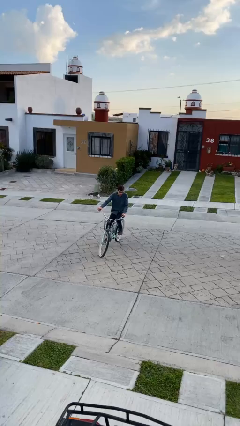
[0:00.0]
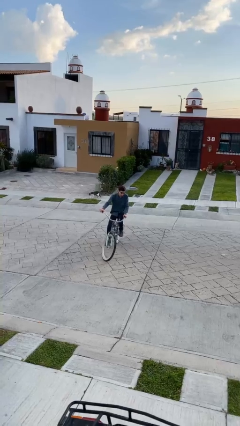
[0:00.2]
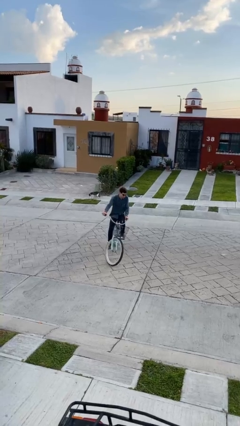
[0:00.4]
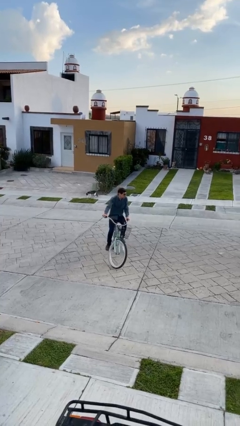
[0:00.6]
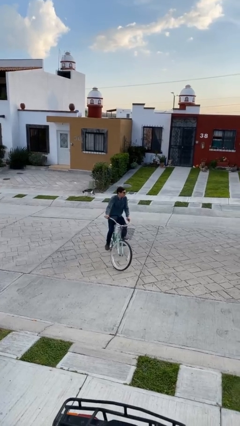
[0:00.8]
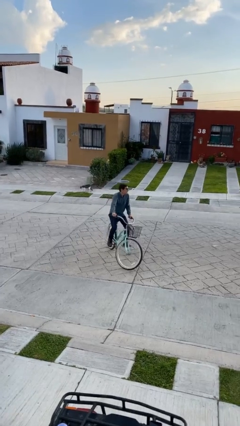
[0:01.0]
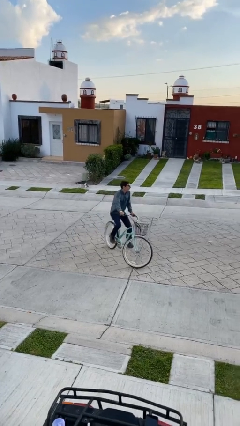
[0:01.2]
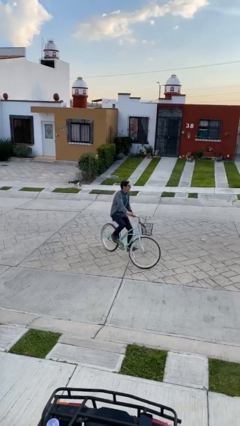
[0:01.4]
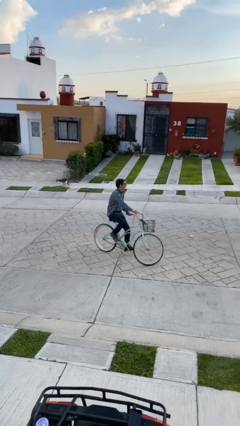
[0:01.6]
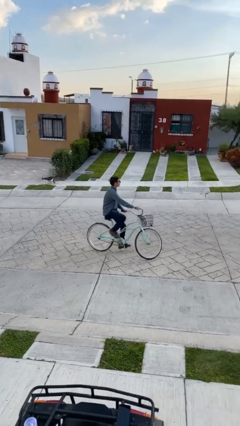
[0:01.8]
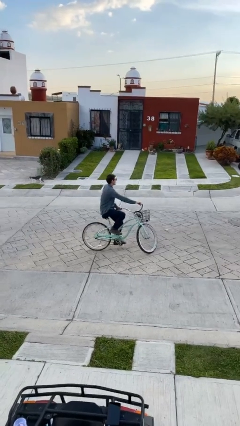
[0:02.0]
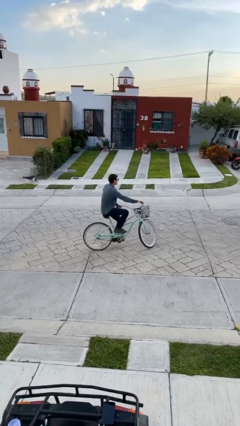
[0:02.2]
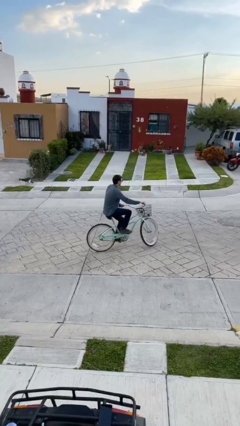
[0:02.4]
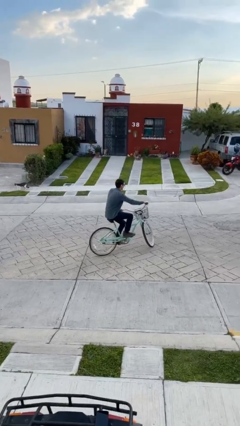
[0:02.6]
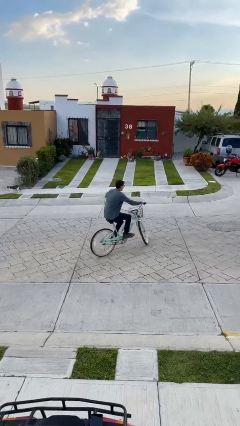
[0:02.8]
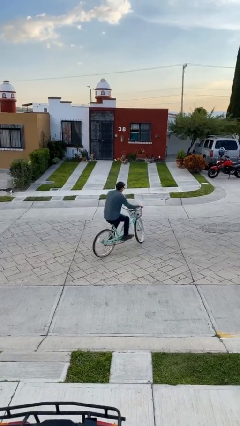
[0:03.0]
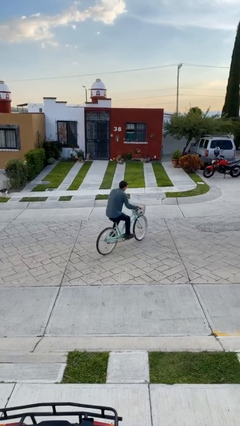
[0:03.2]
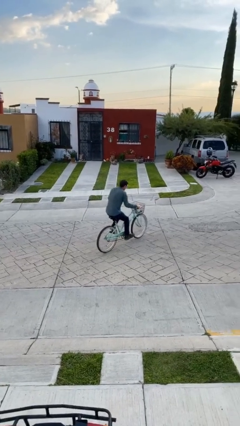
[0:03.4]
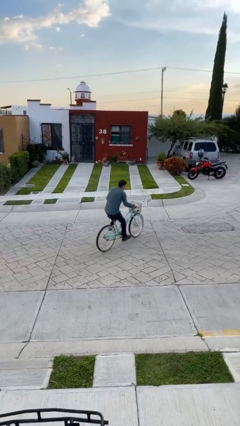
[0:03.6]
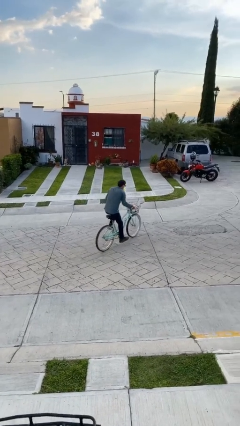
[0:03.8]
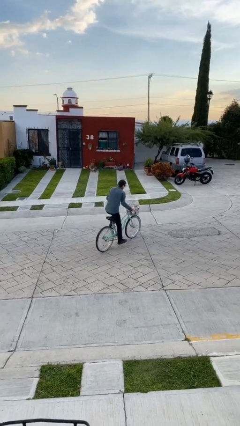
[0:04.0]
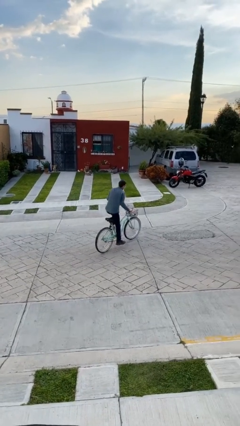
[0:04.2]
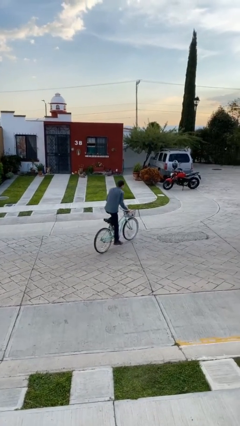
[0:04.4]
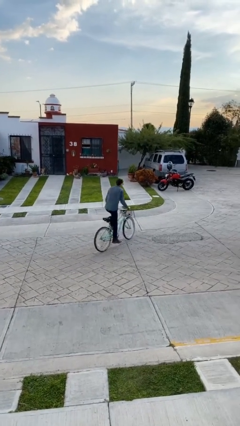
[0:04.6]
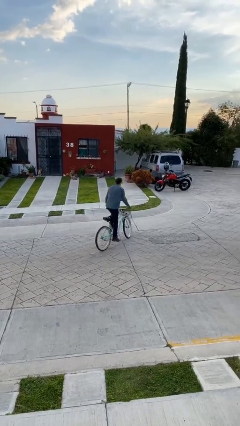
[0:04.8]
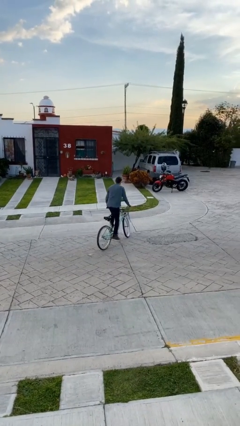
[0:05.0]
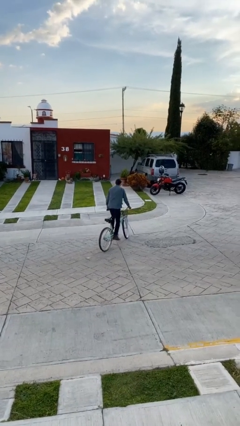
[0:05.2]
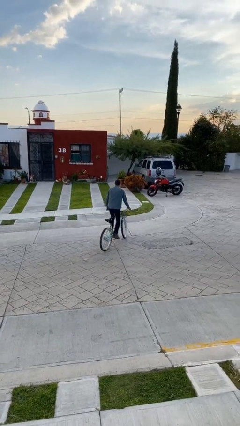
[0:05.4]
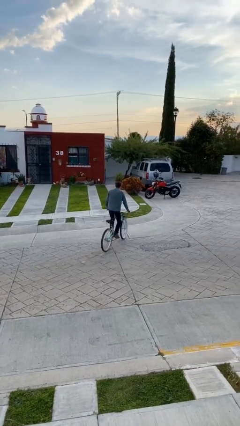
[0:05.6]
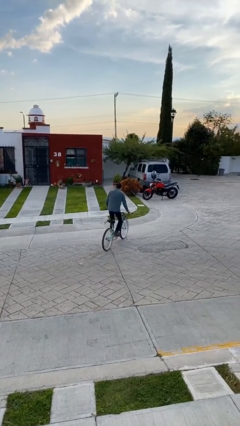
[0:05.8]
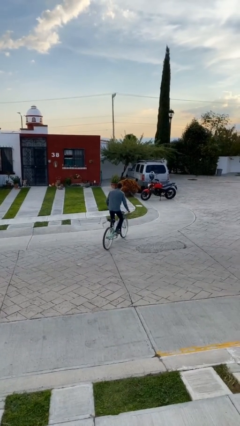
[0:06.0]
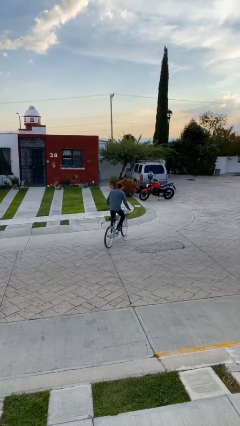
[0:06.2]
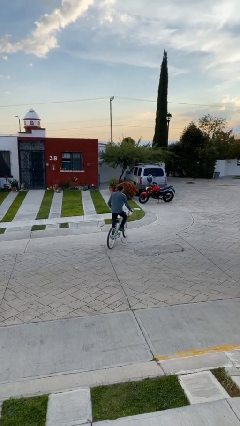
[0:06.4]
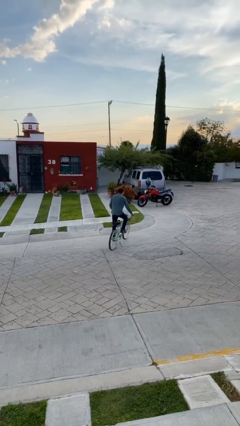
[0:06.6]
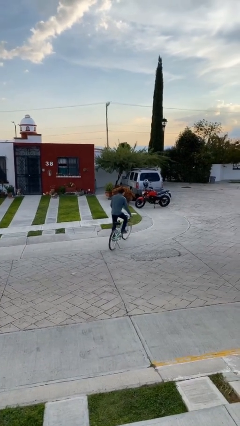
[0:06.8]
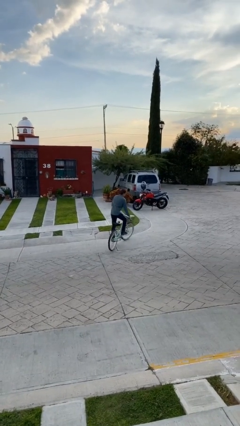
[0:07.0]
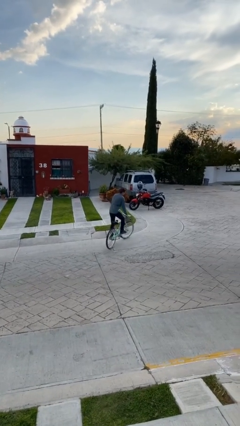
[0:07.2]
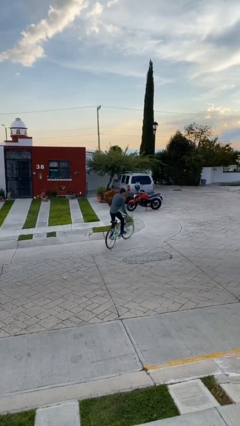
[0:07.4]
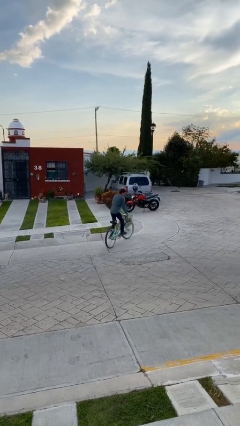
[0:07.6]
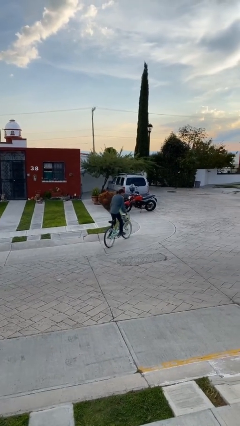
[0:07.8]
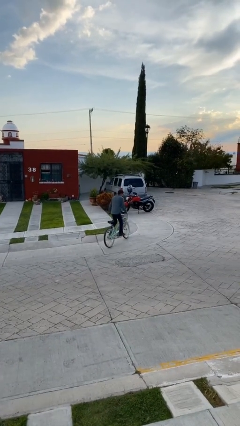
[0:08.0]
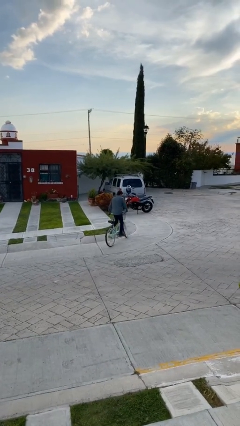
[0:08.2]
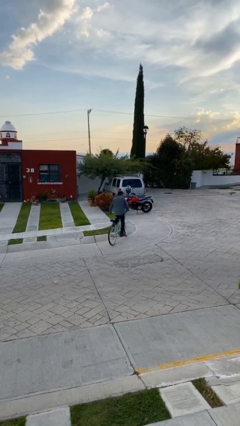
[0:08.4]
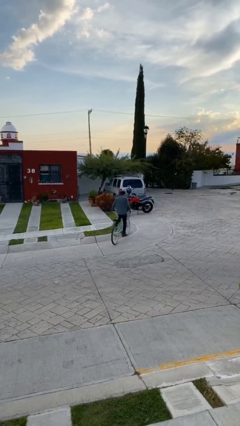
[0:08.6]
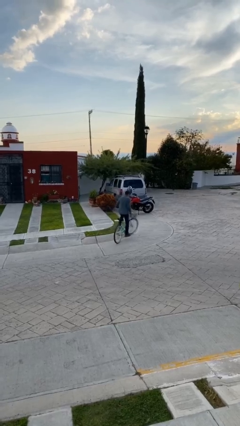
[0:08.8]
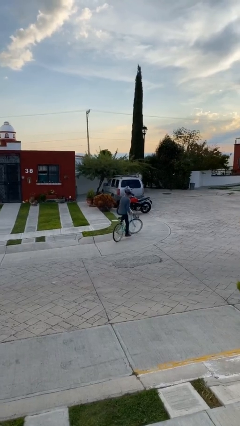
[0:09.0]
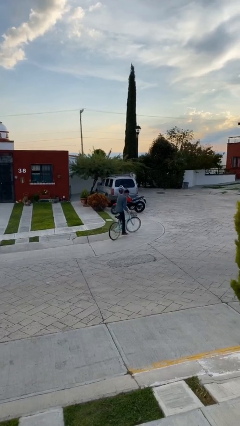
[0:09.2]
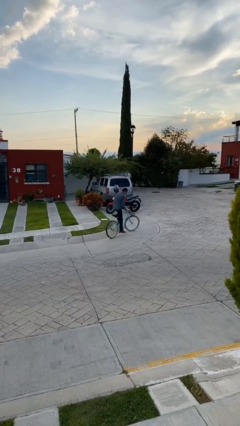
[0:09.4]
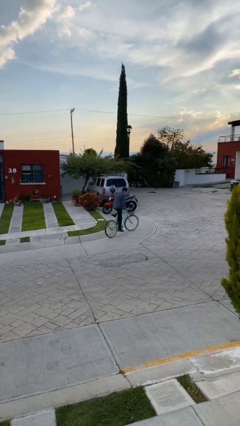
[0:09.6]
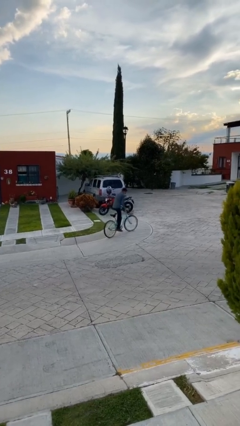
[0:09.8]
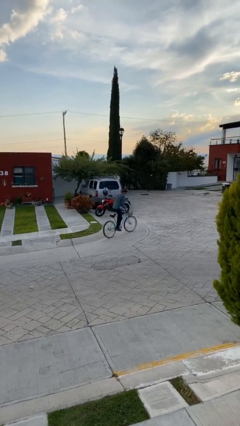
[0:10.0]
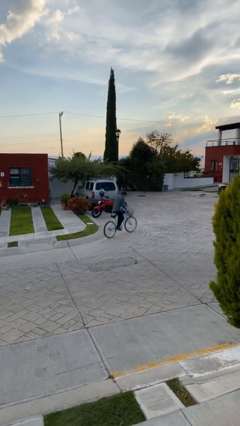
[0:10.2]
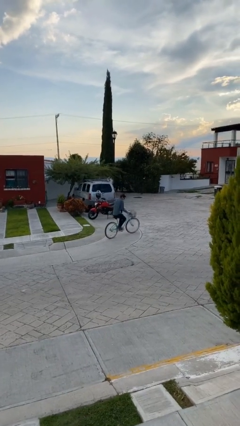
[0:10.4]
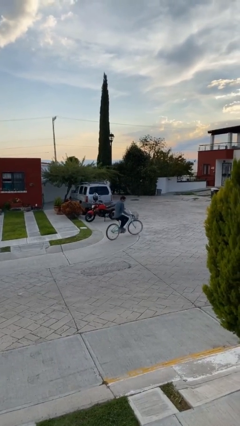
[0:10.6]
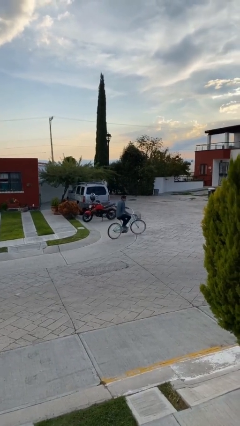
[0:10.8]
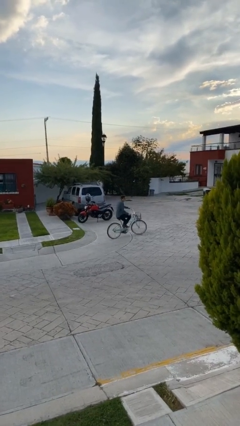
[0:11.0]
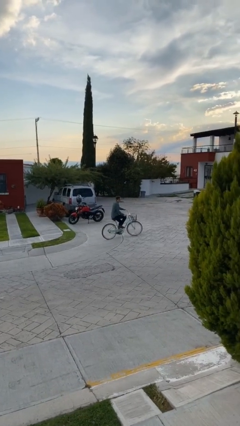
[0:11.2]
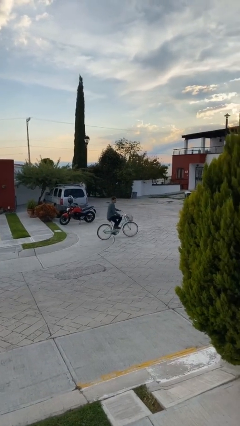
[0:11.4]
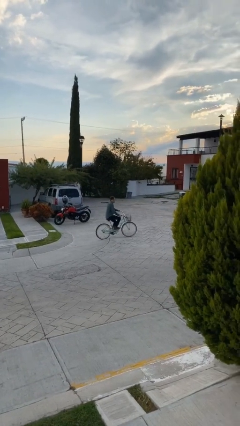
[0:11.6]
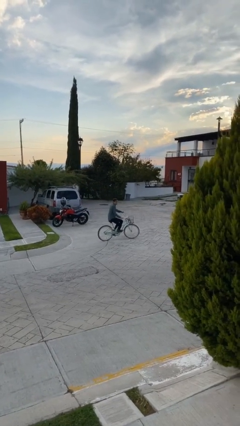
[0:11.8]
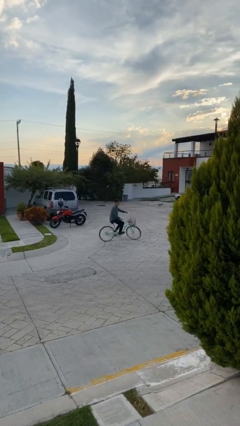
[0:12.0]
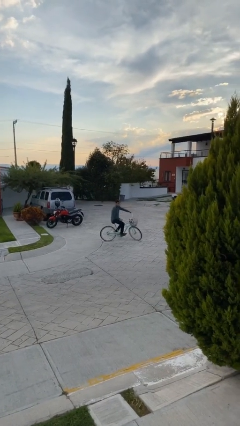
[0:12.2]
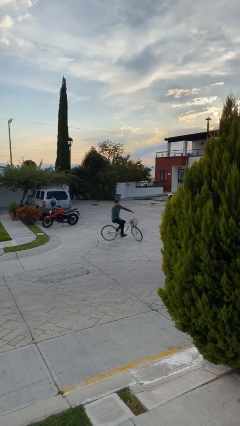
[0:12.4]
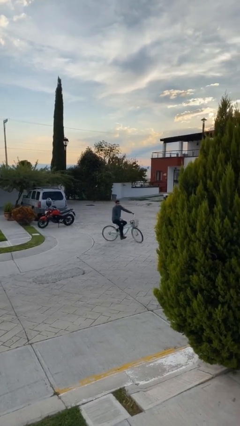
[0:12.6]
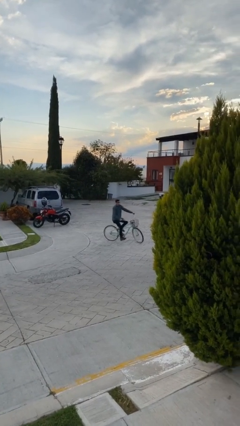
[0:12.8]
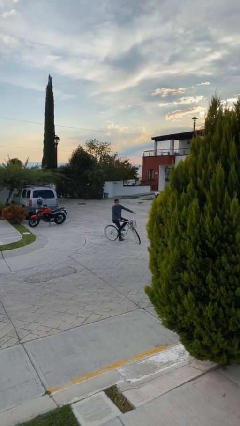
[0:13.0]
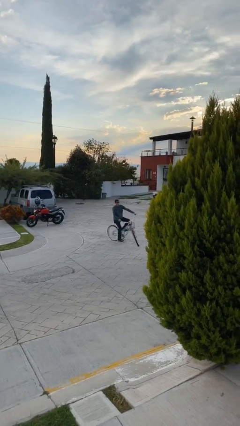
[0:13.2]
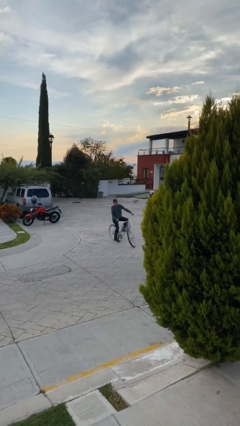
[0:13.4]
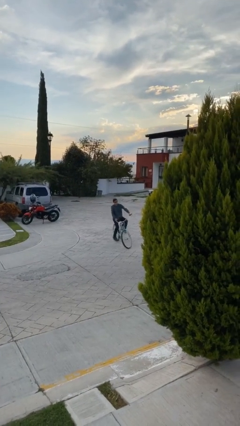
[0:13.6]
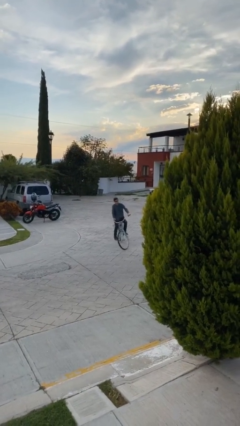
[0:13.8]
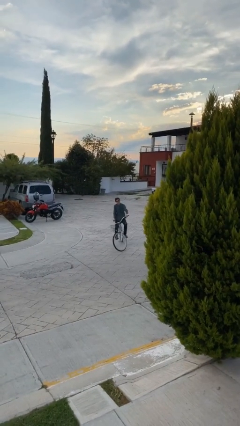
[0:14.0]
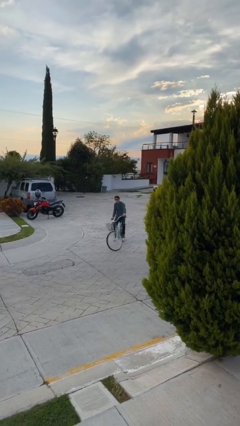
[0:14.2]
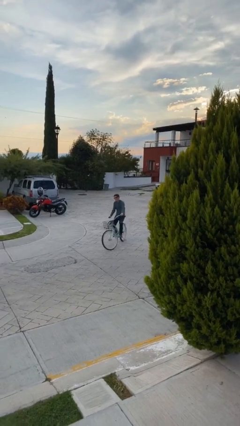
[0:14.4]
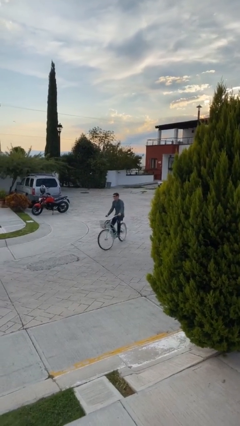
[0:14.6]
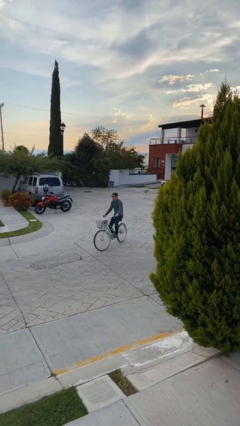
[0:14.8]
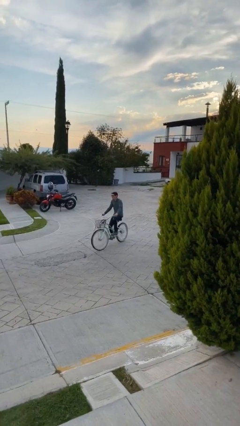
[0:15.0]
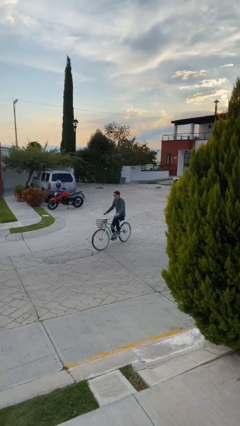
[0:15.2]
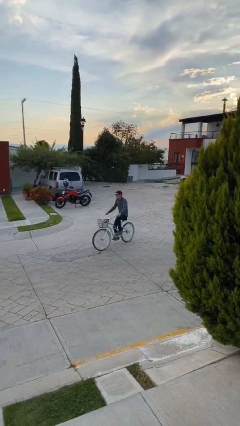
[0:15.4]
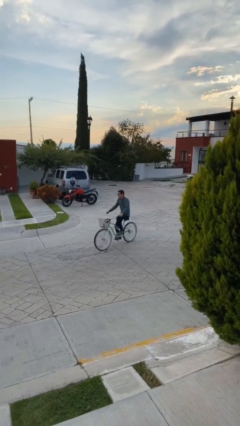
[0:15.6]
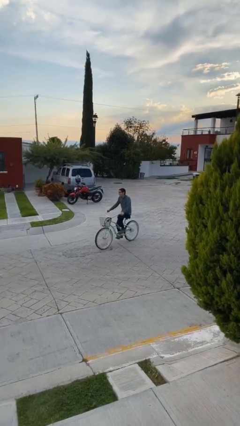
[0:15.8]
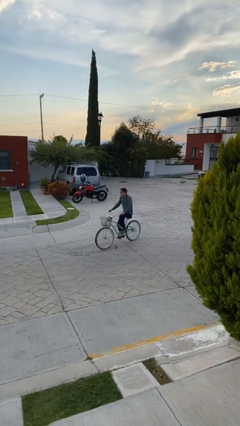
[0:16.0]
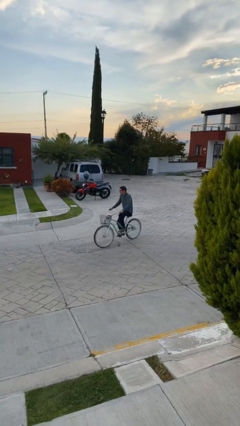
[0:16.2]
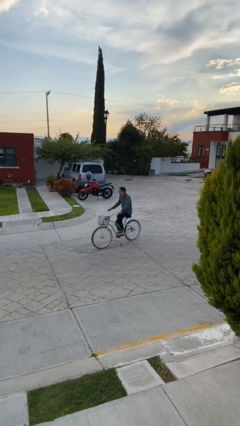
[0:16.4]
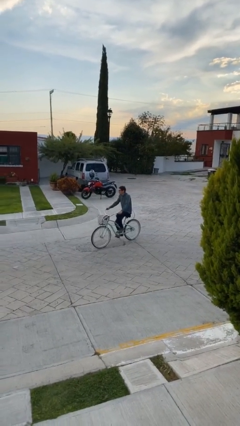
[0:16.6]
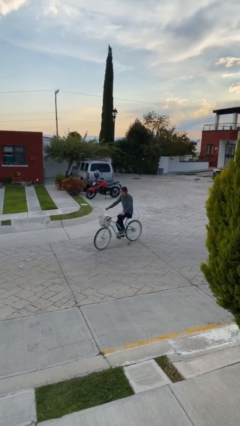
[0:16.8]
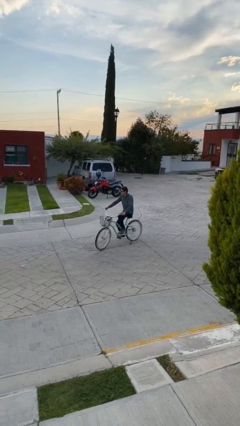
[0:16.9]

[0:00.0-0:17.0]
person rides bicycle

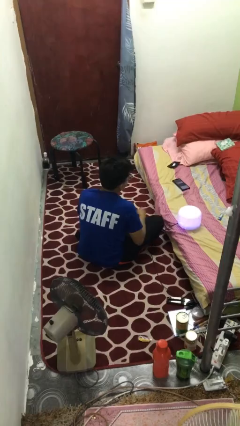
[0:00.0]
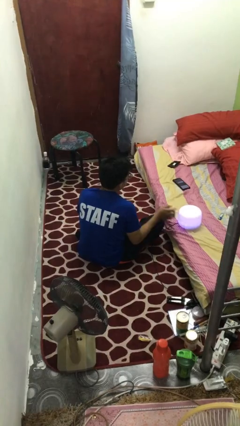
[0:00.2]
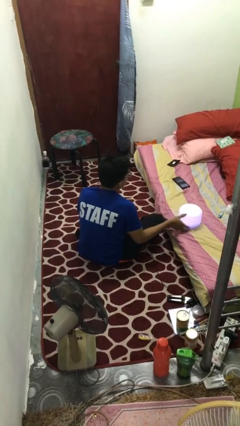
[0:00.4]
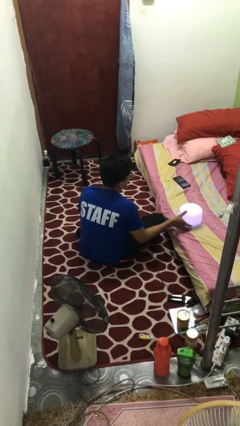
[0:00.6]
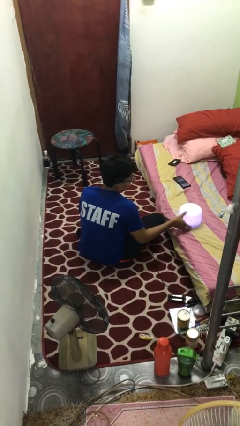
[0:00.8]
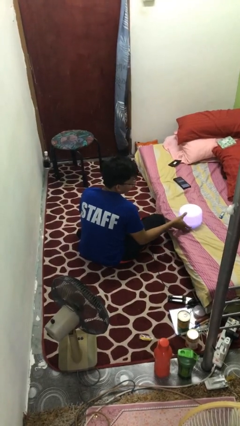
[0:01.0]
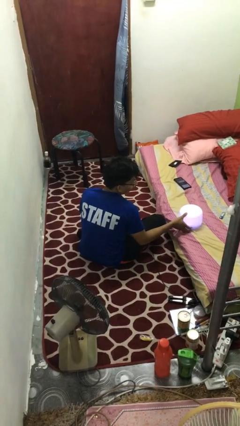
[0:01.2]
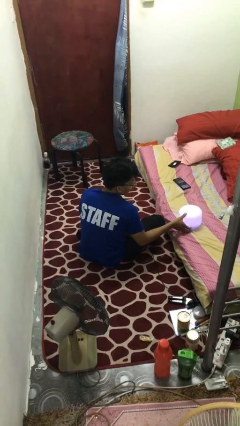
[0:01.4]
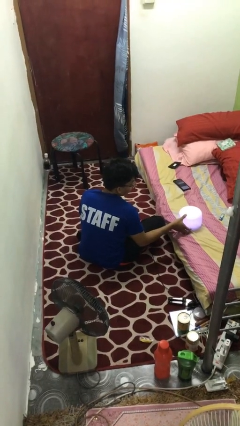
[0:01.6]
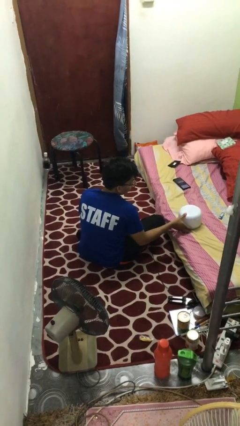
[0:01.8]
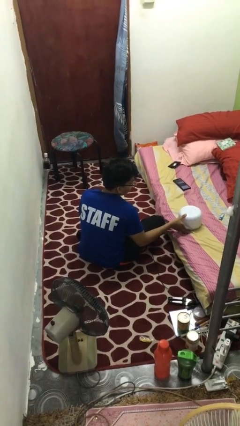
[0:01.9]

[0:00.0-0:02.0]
person turns off lamp
